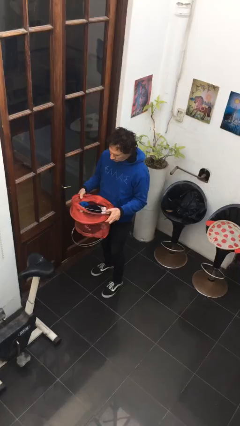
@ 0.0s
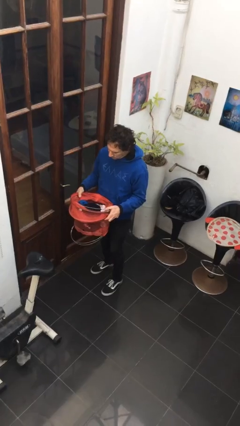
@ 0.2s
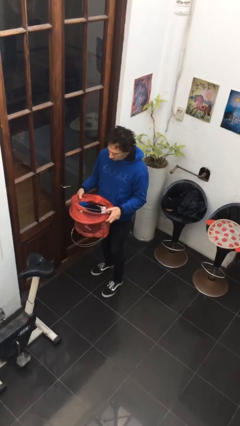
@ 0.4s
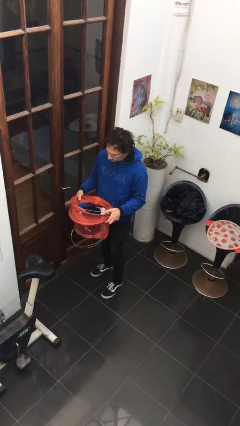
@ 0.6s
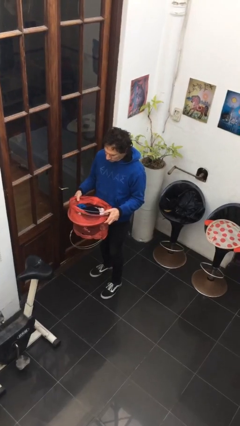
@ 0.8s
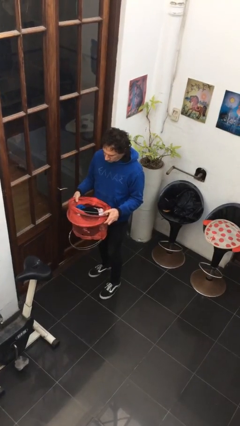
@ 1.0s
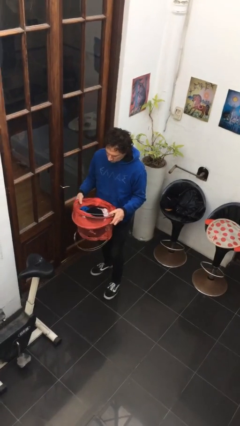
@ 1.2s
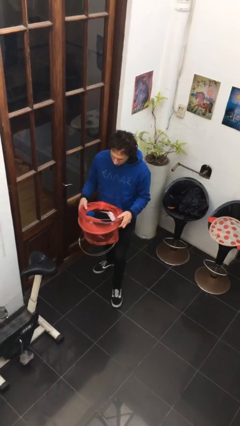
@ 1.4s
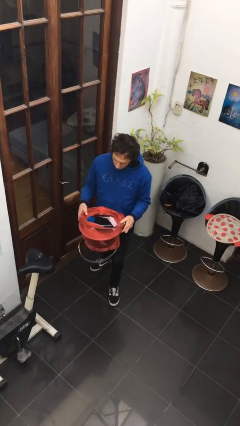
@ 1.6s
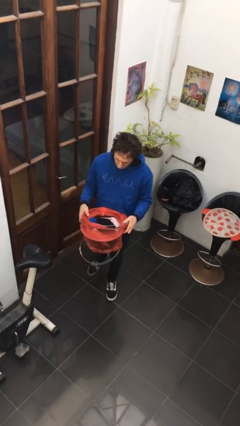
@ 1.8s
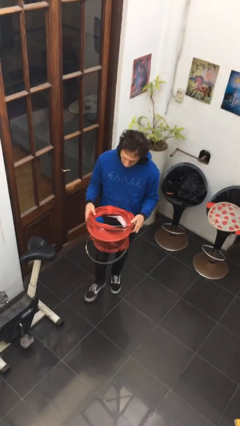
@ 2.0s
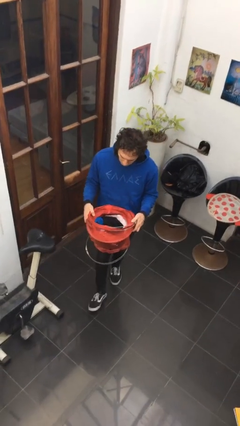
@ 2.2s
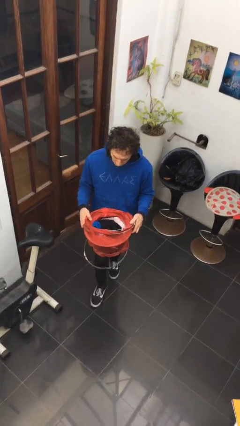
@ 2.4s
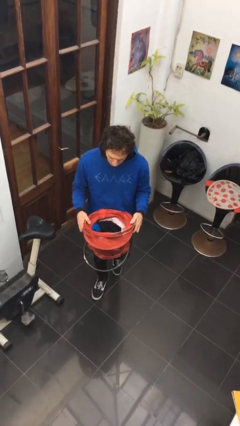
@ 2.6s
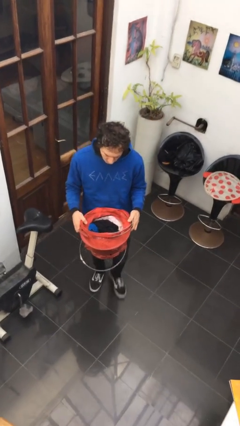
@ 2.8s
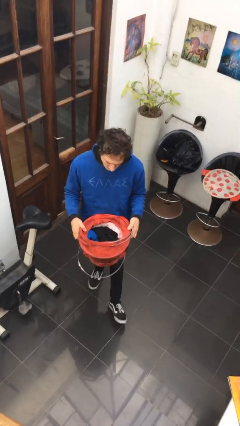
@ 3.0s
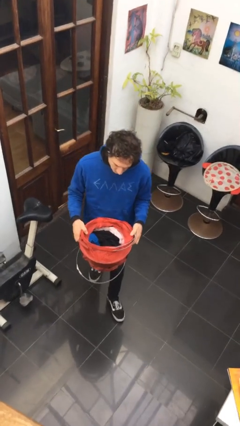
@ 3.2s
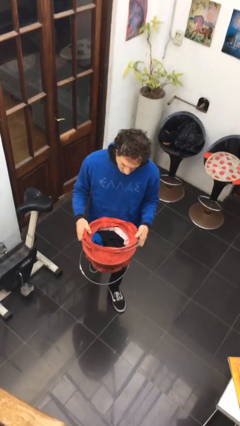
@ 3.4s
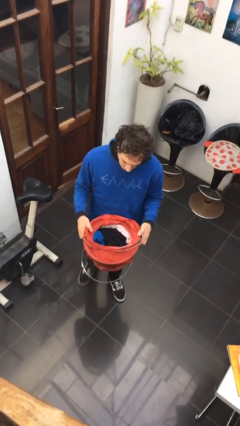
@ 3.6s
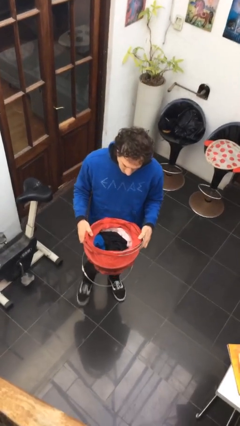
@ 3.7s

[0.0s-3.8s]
person carries laundry basket

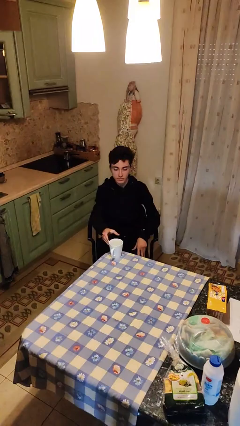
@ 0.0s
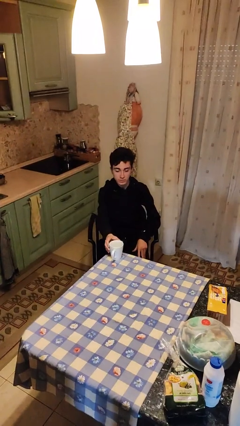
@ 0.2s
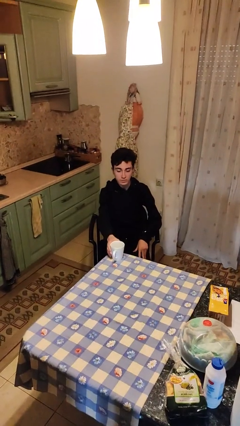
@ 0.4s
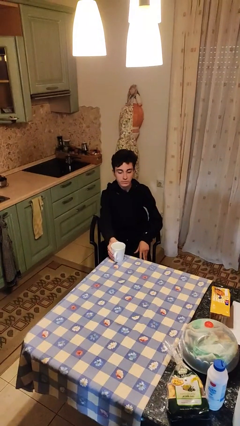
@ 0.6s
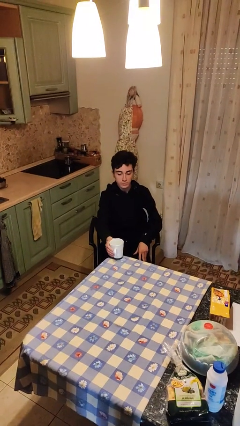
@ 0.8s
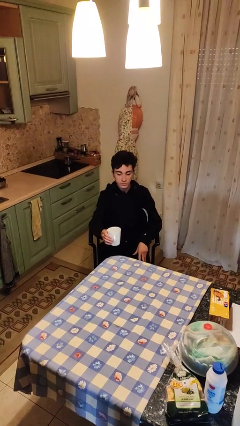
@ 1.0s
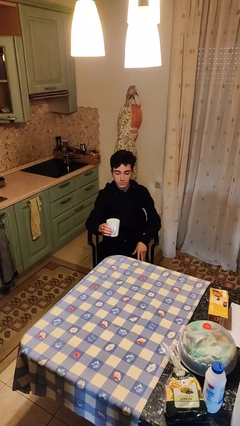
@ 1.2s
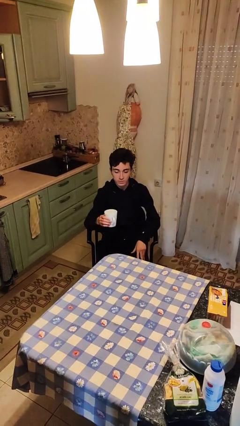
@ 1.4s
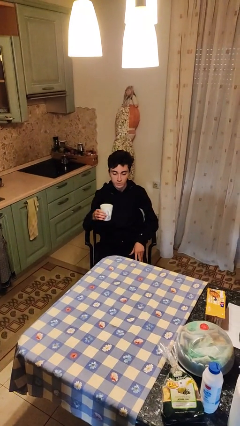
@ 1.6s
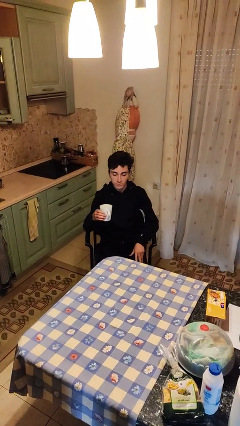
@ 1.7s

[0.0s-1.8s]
person picks up object from table

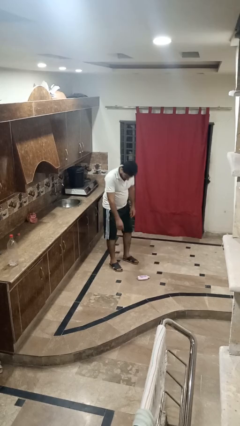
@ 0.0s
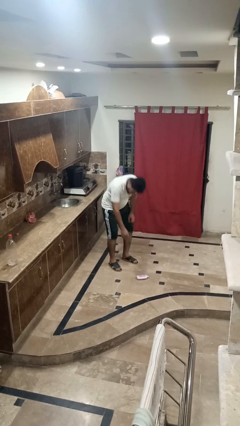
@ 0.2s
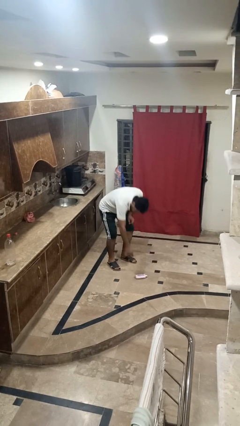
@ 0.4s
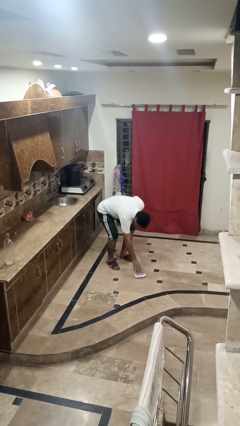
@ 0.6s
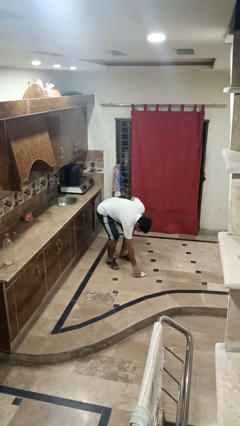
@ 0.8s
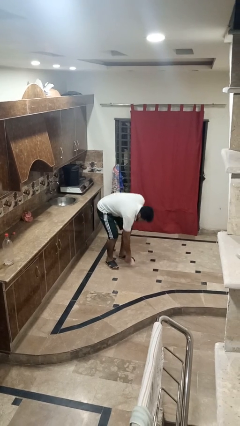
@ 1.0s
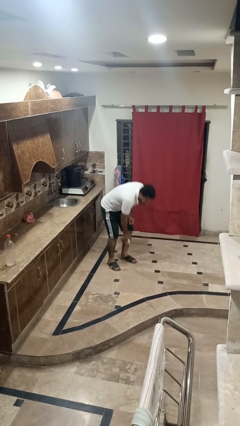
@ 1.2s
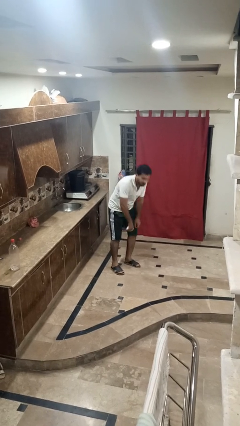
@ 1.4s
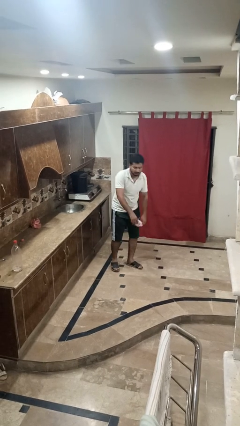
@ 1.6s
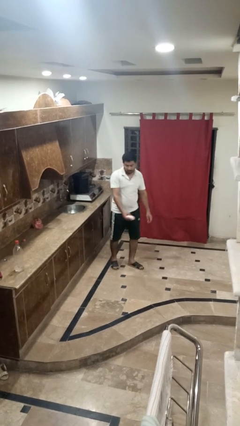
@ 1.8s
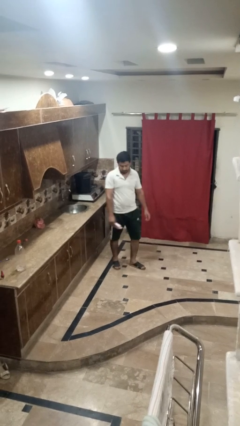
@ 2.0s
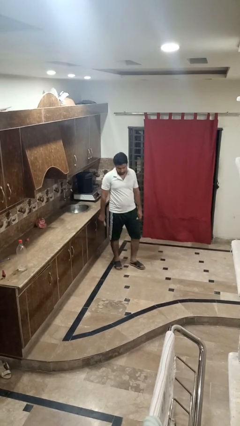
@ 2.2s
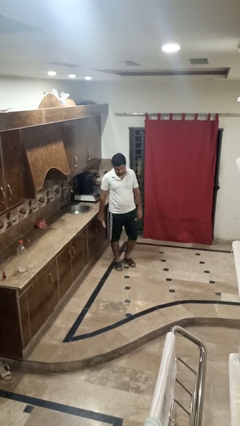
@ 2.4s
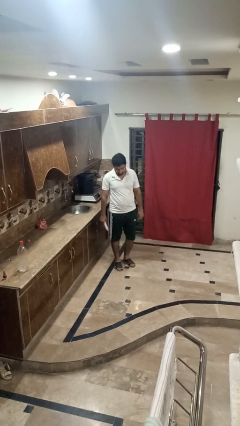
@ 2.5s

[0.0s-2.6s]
person picks up object from floor

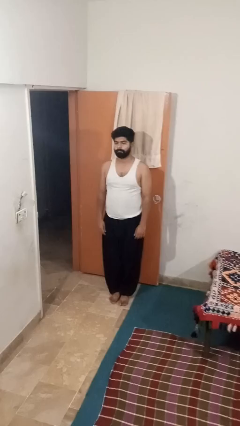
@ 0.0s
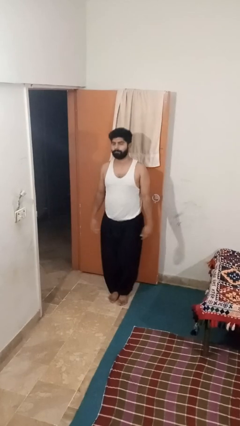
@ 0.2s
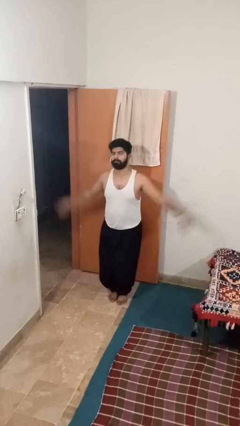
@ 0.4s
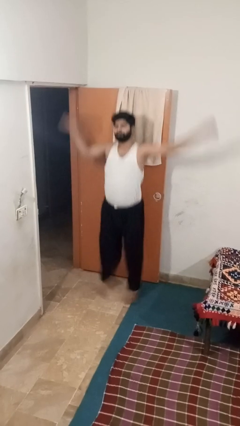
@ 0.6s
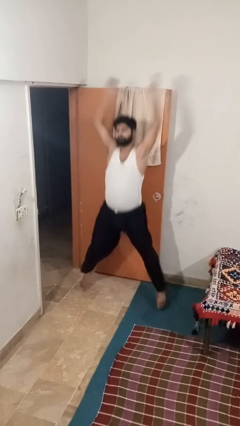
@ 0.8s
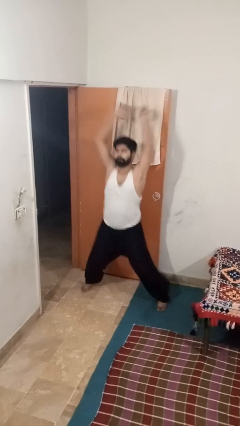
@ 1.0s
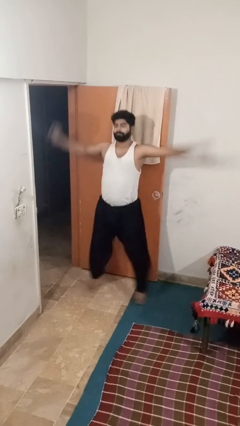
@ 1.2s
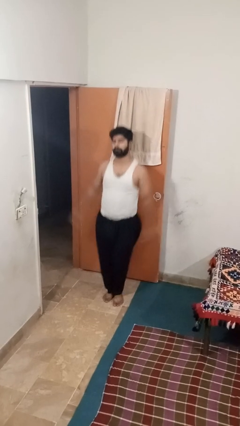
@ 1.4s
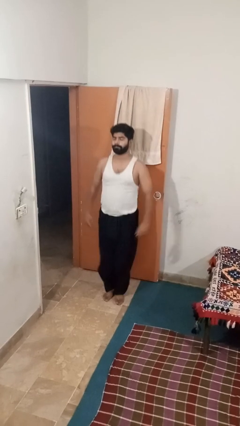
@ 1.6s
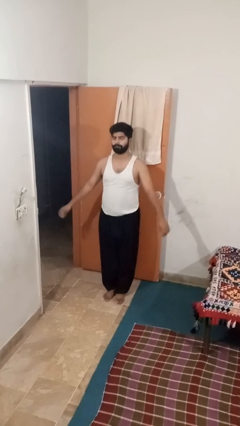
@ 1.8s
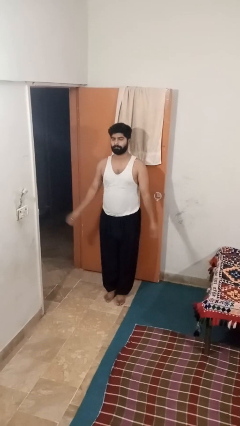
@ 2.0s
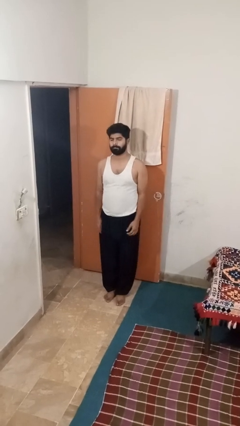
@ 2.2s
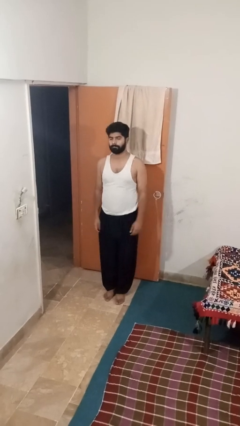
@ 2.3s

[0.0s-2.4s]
person exercises with jumping jacks

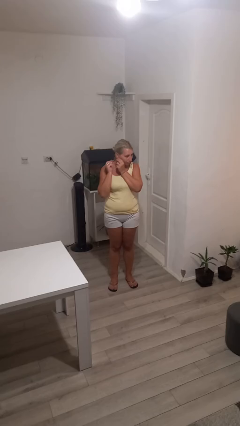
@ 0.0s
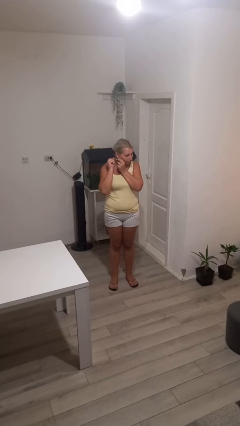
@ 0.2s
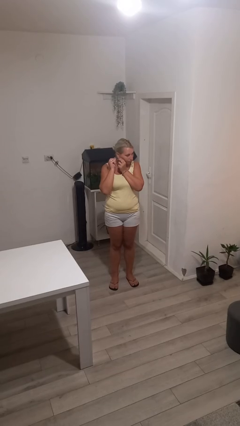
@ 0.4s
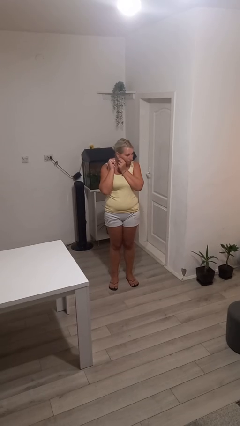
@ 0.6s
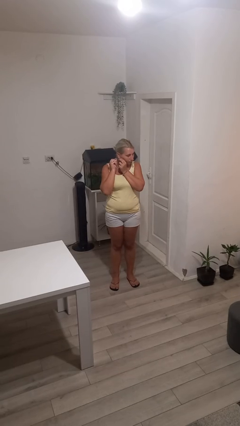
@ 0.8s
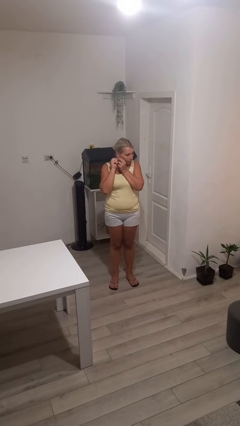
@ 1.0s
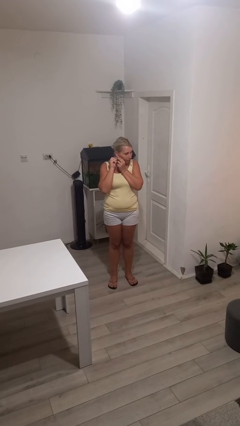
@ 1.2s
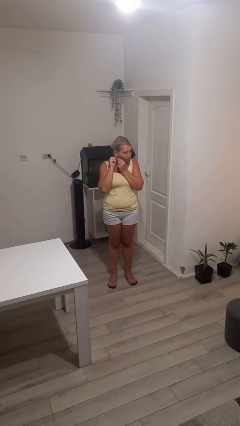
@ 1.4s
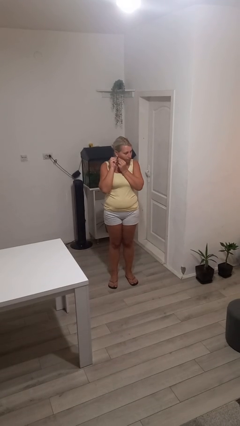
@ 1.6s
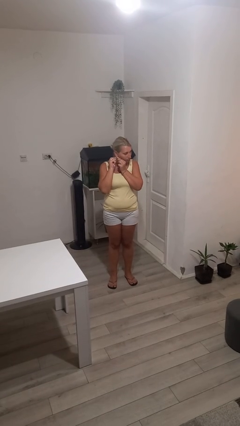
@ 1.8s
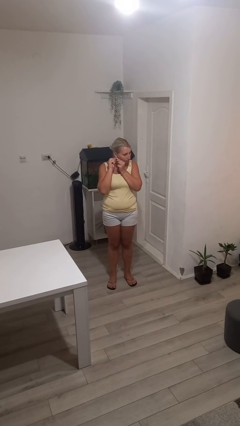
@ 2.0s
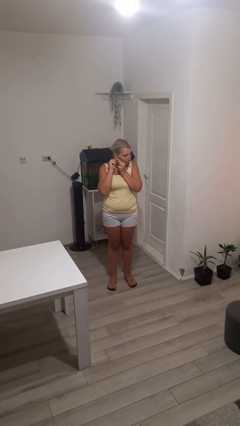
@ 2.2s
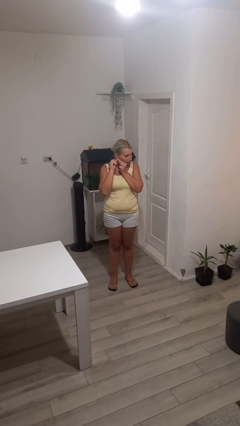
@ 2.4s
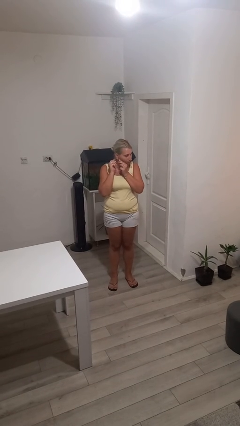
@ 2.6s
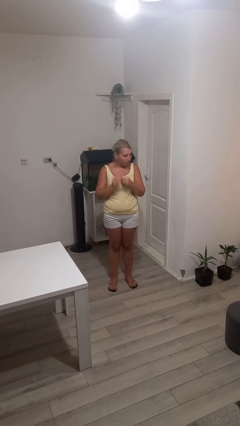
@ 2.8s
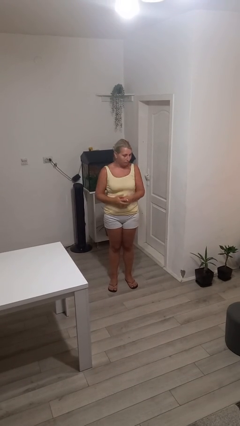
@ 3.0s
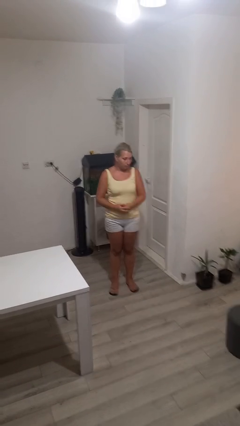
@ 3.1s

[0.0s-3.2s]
person puts on earrings

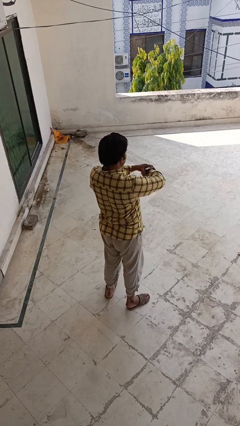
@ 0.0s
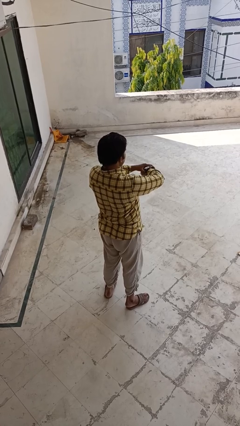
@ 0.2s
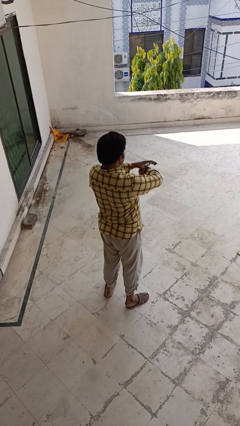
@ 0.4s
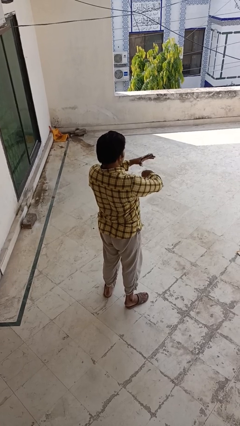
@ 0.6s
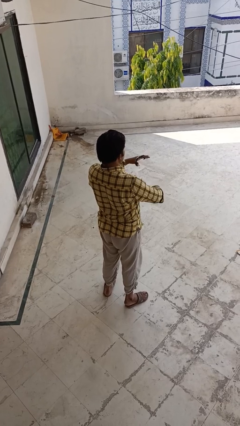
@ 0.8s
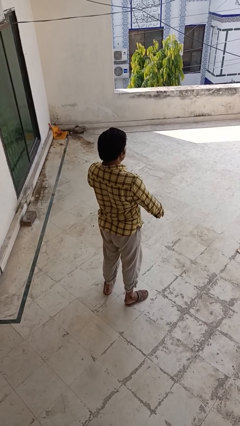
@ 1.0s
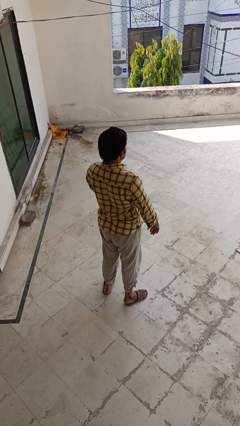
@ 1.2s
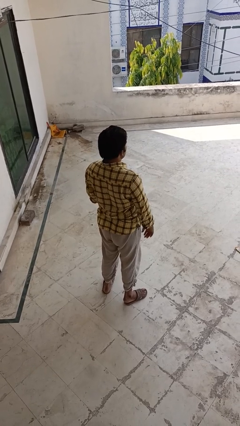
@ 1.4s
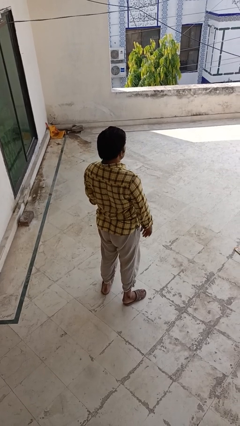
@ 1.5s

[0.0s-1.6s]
person takes off wristwatch

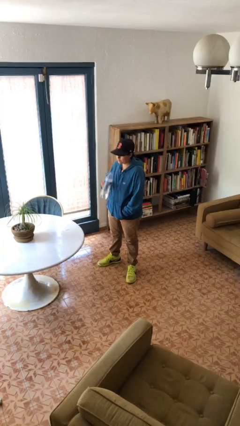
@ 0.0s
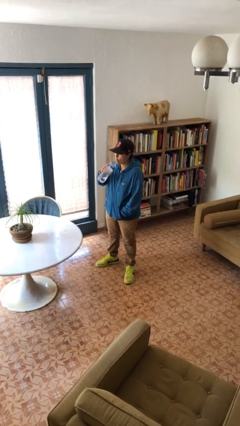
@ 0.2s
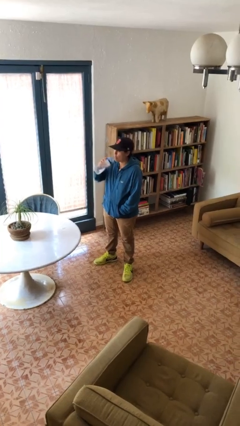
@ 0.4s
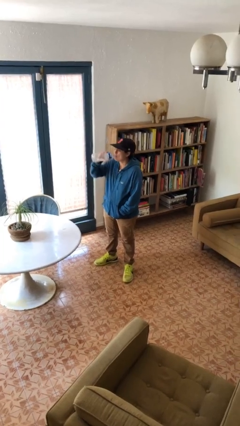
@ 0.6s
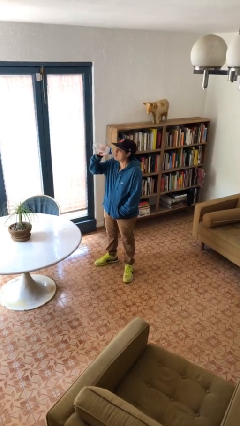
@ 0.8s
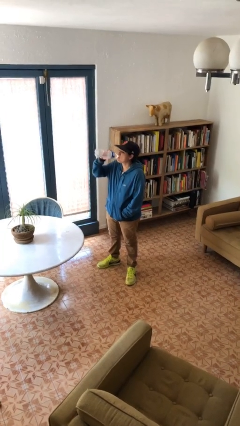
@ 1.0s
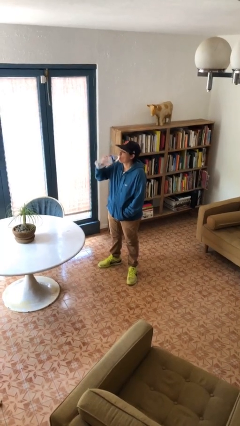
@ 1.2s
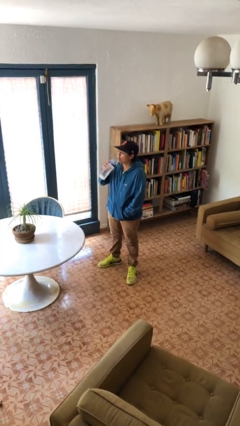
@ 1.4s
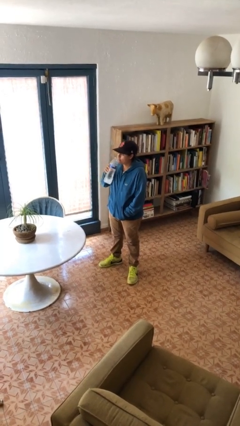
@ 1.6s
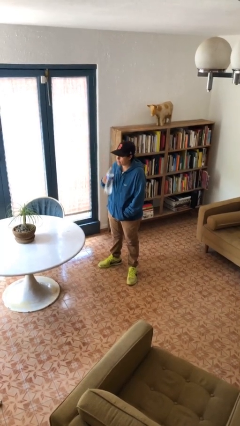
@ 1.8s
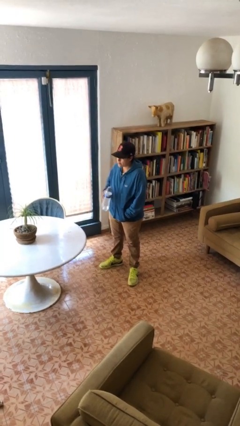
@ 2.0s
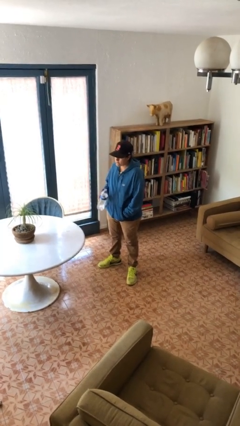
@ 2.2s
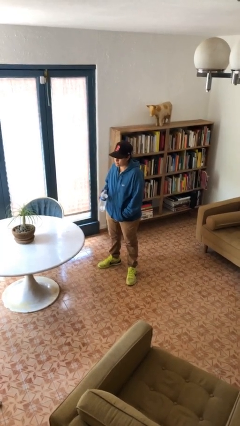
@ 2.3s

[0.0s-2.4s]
person drinks from bottle
